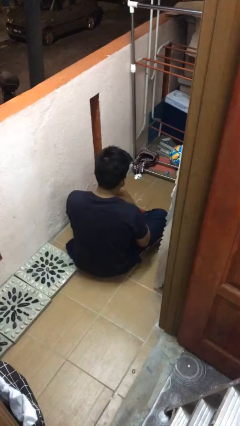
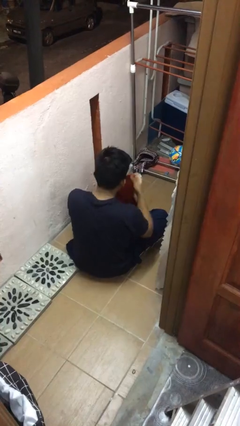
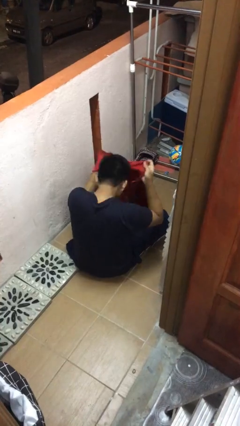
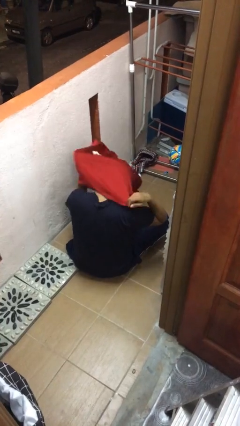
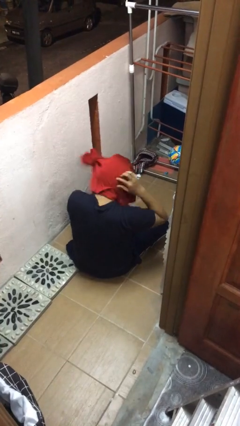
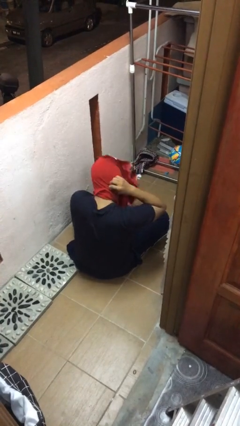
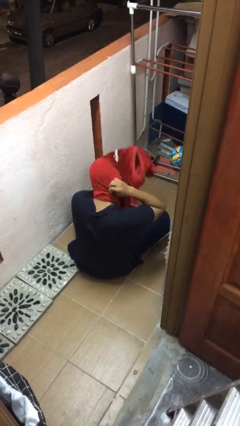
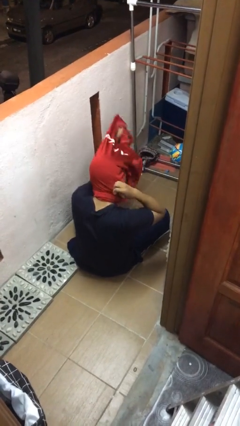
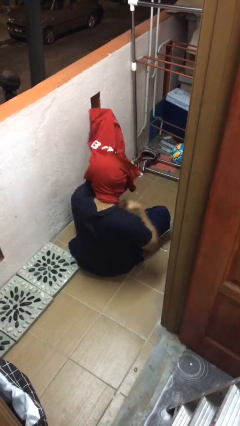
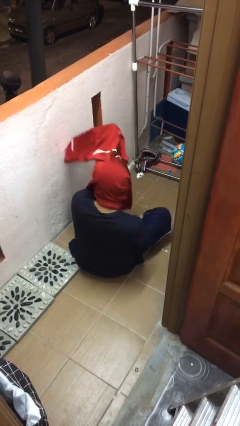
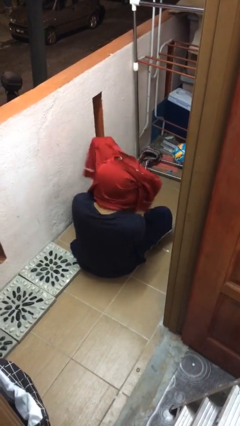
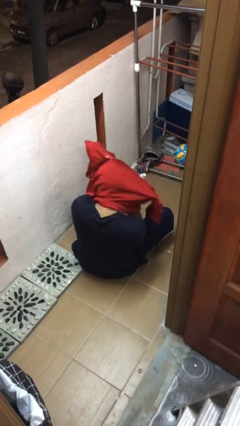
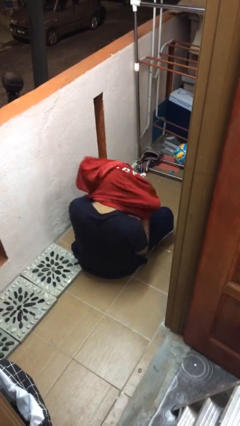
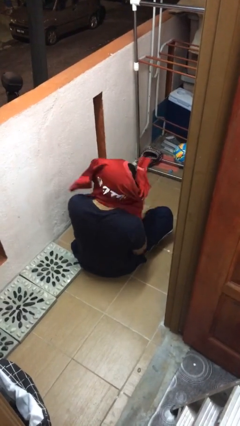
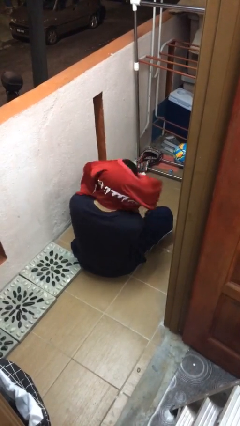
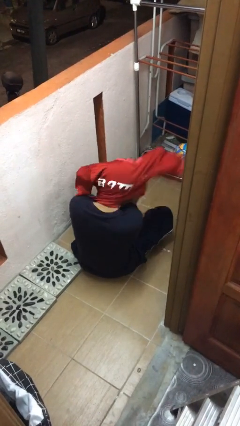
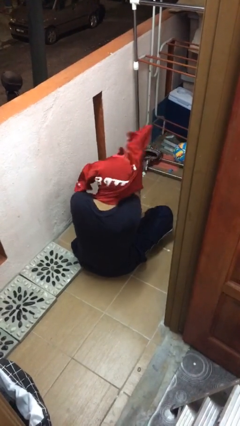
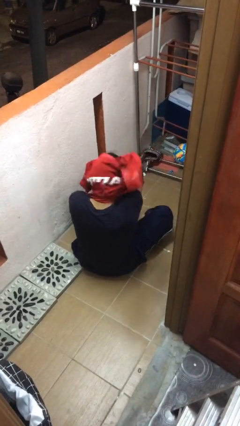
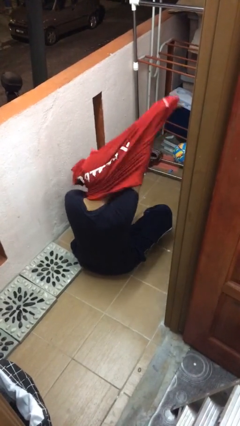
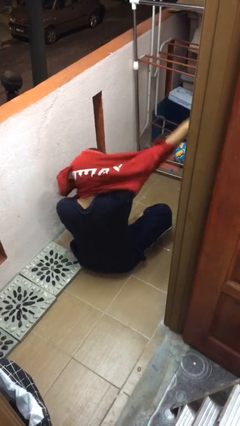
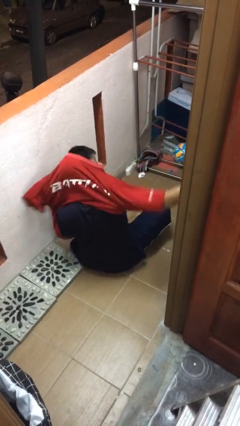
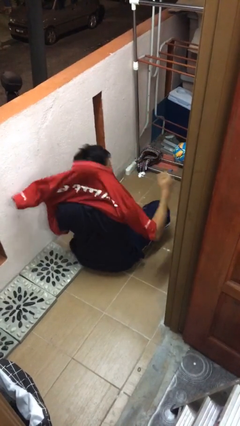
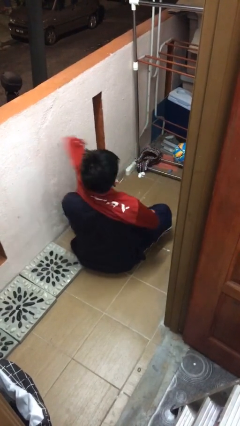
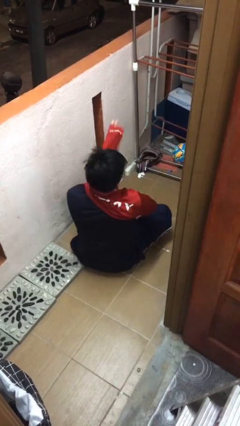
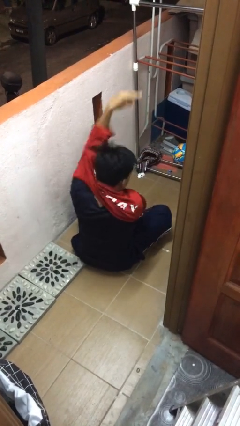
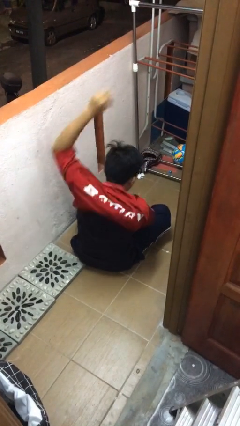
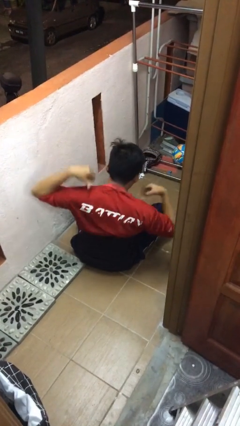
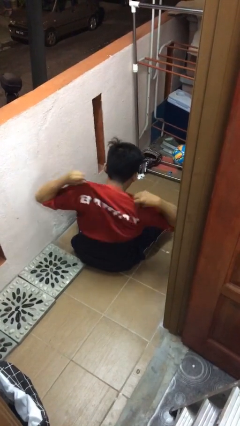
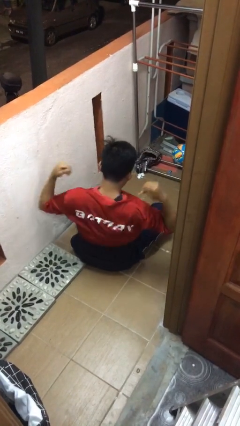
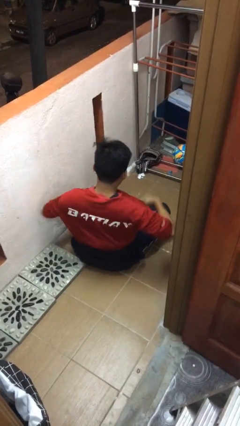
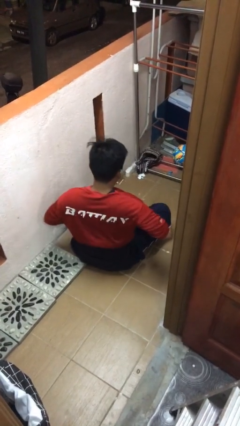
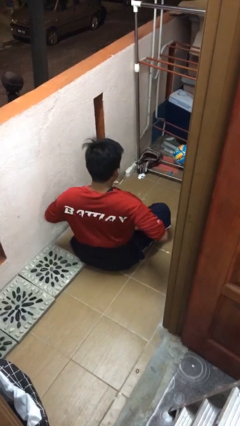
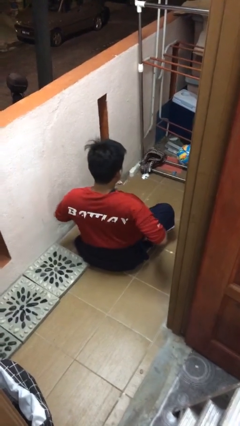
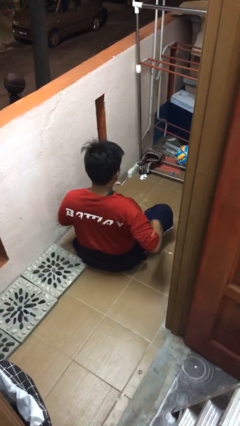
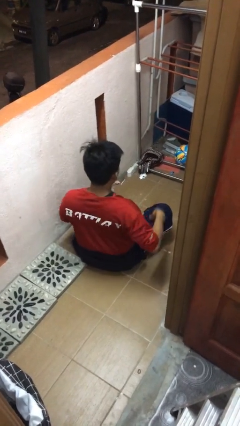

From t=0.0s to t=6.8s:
person puts on shirt

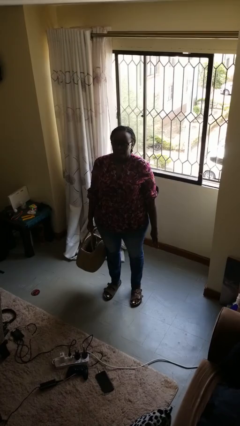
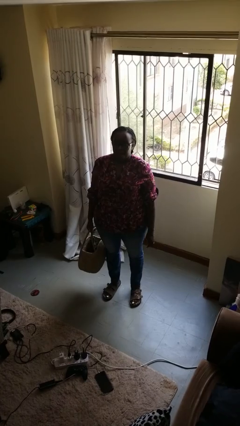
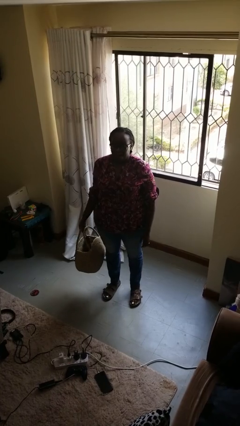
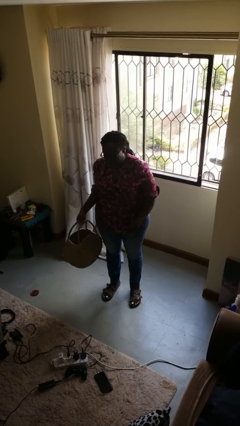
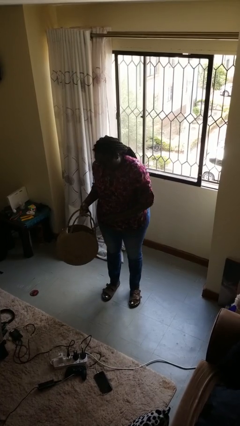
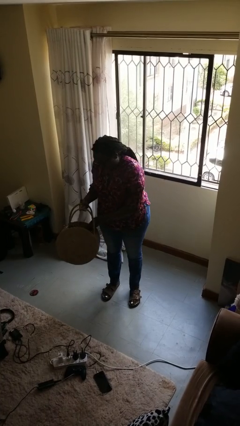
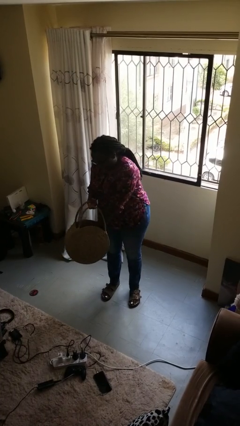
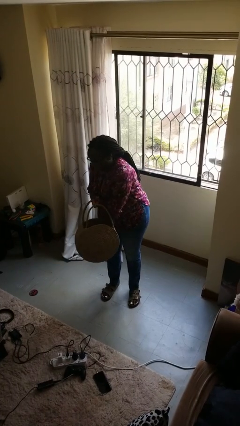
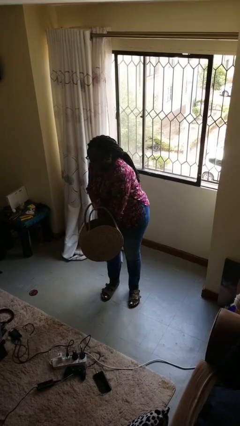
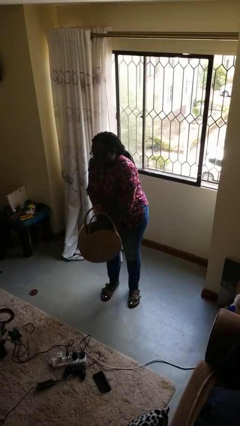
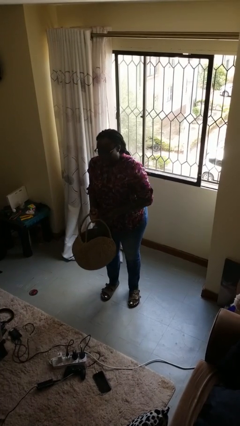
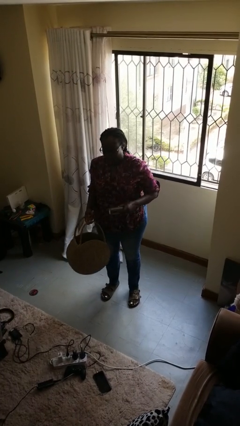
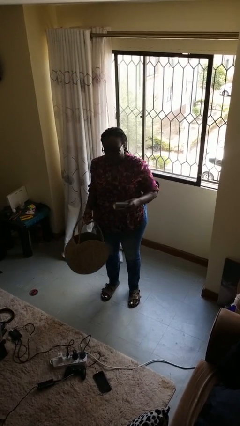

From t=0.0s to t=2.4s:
person takes object from basket

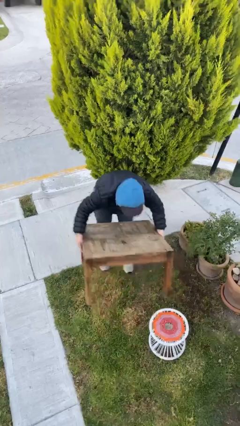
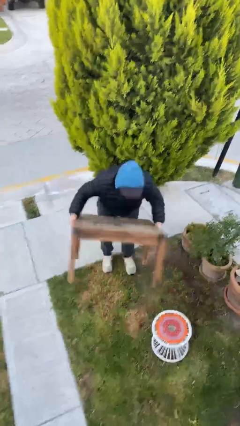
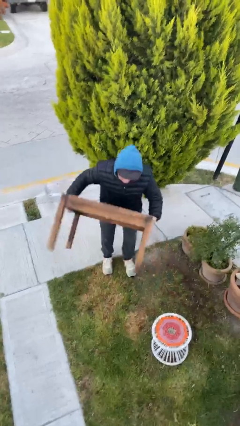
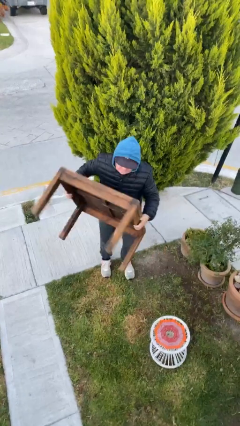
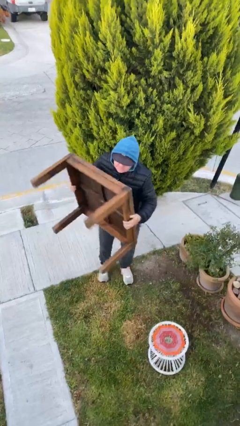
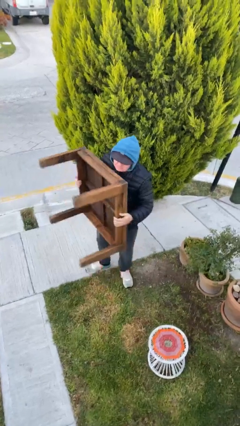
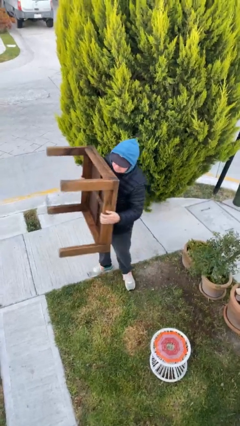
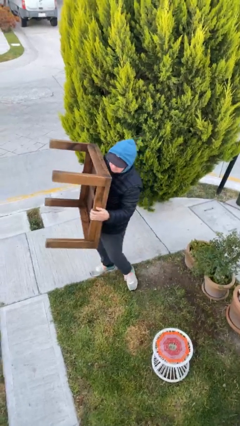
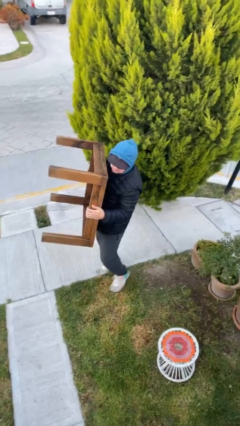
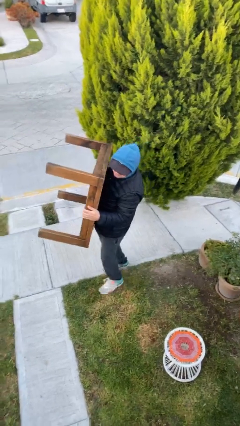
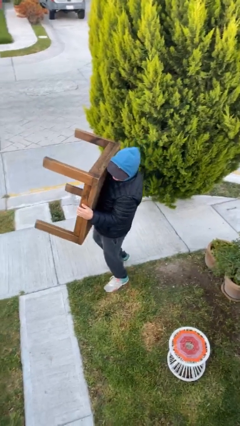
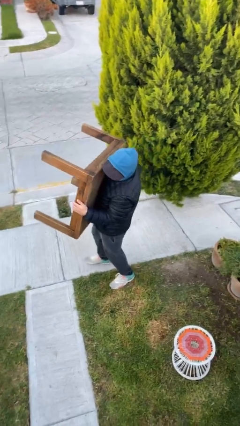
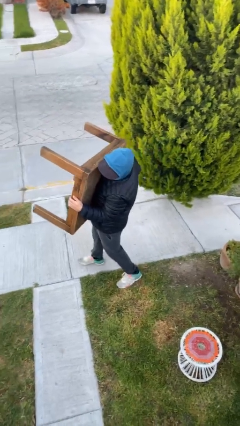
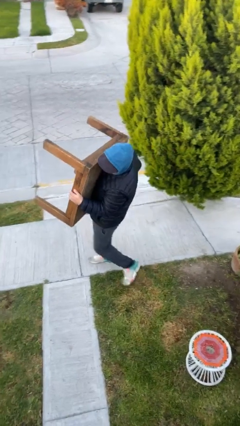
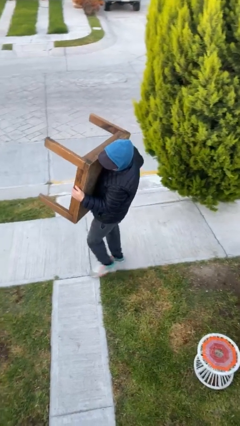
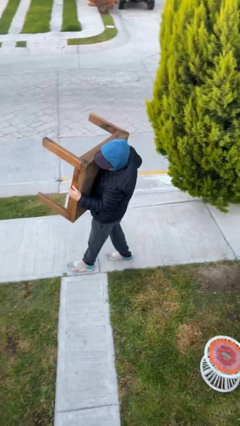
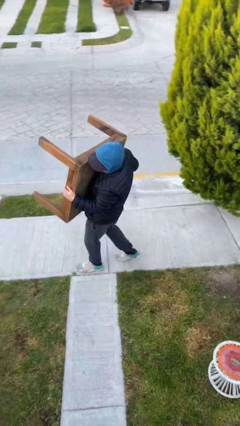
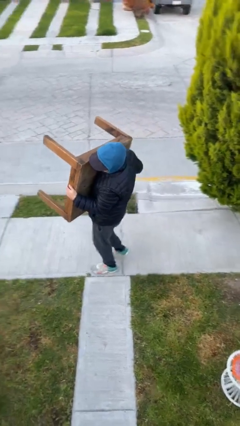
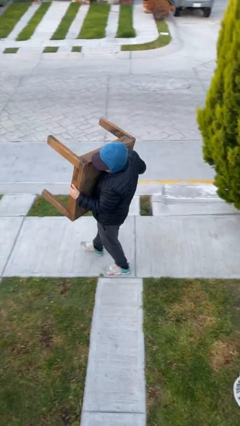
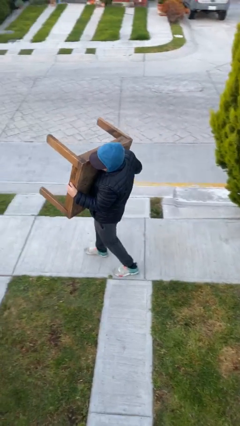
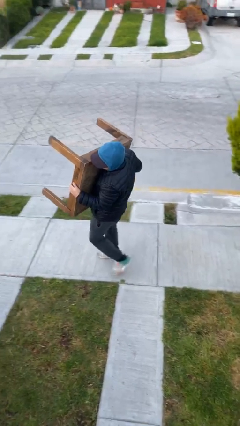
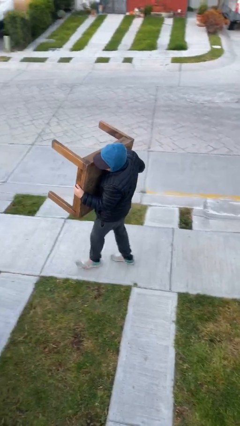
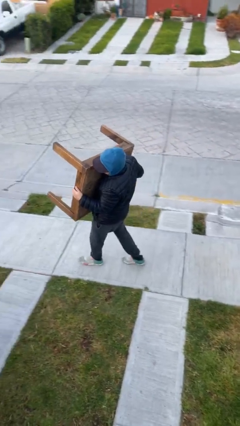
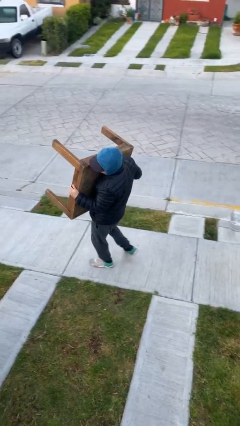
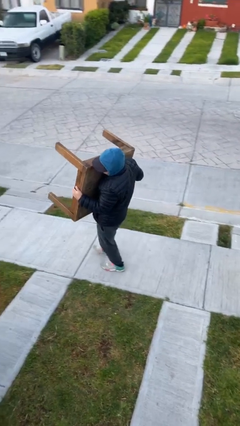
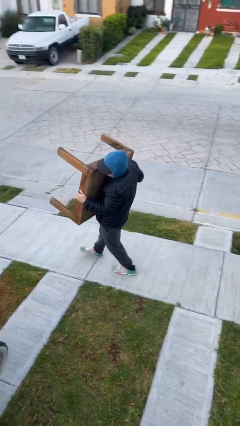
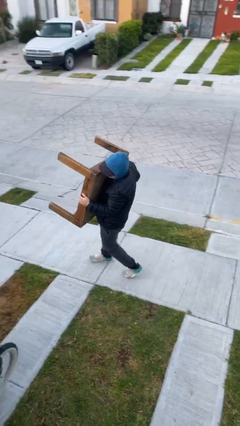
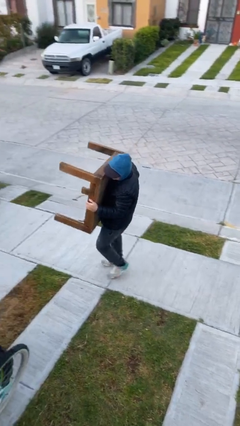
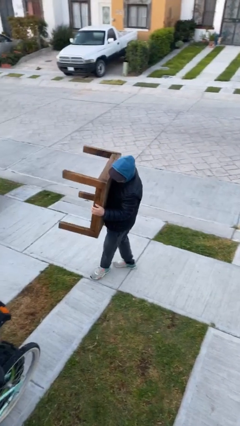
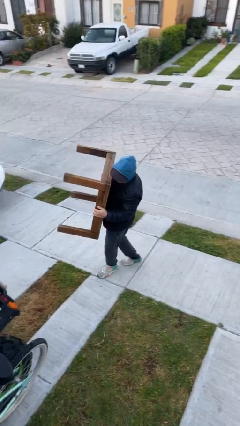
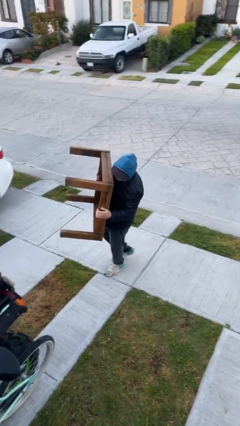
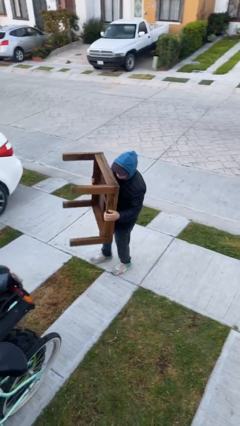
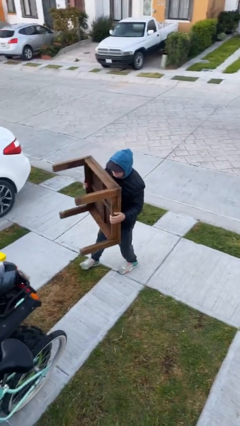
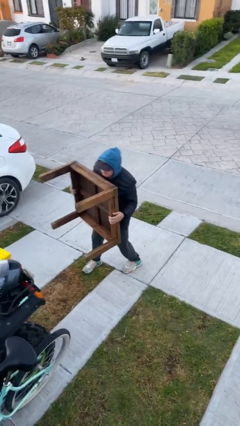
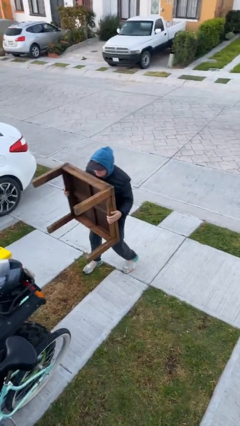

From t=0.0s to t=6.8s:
person carries heavy object

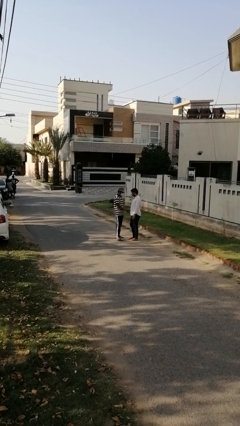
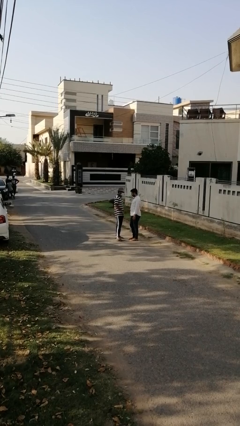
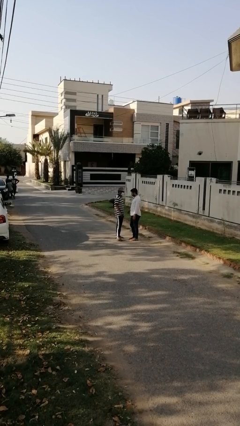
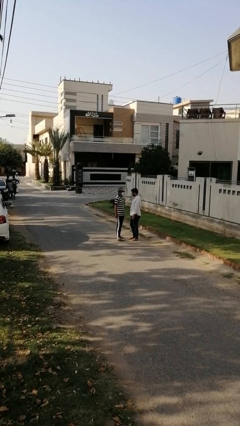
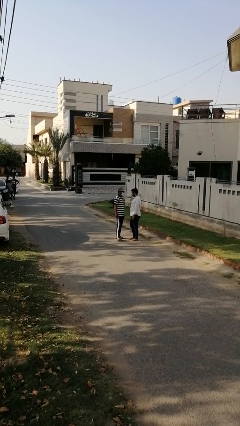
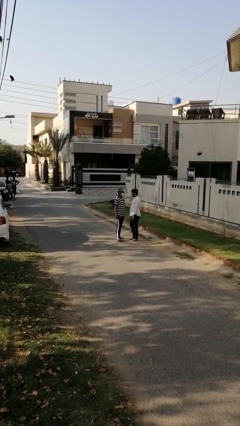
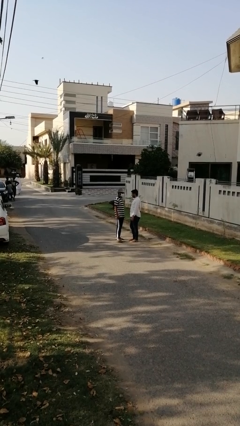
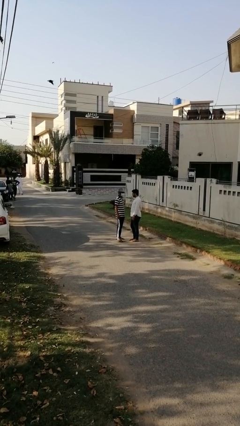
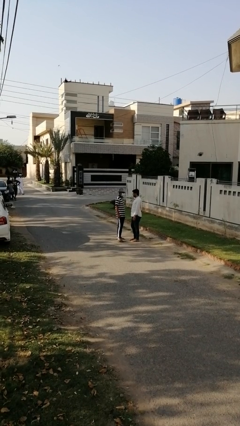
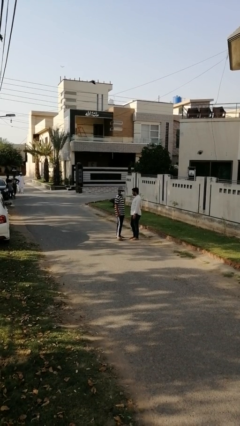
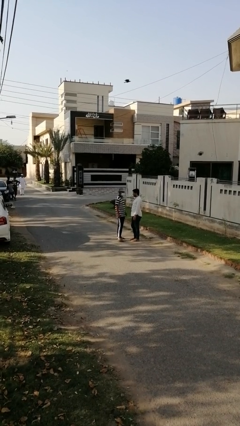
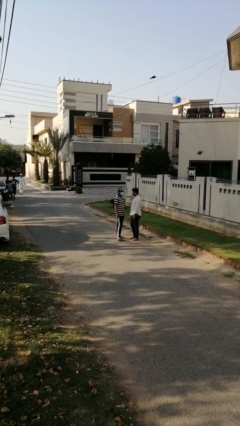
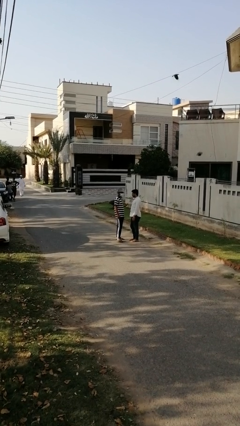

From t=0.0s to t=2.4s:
person highfives hand
